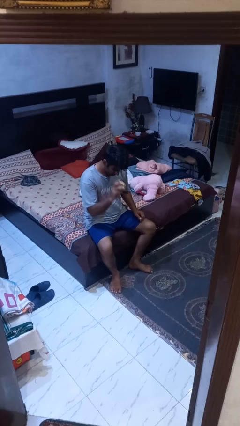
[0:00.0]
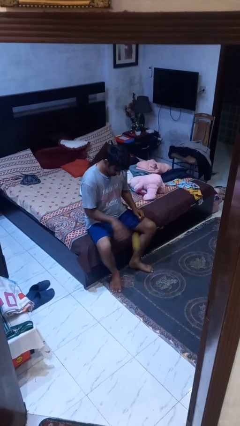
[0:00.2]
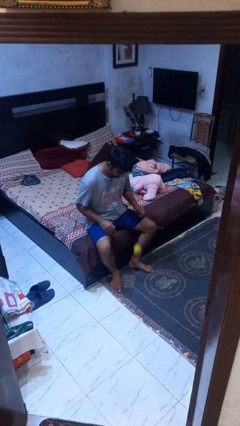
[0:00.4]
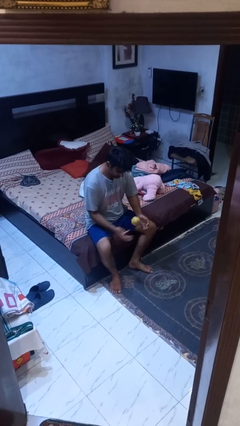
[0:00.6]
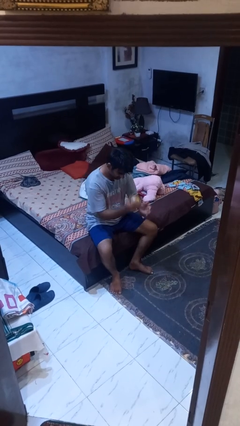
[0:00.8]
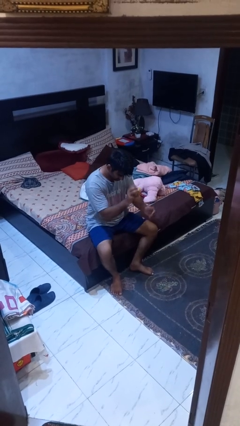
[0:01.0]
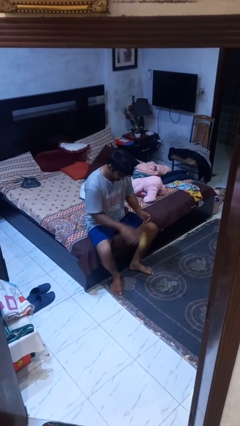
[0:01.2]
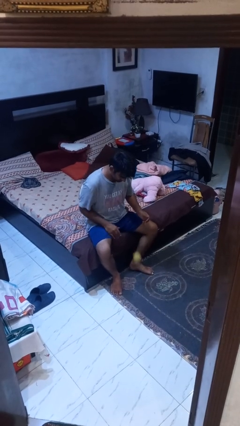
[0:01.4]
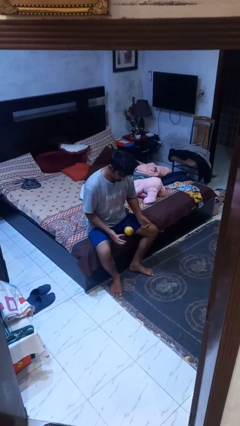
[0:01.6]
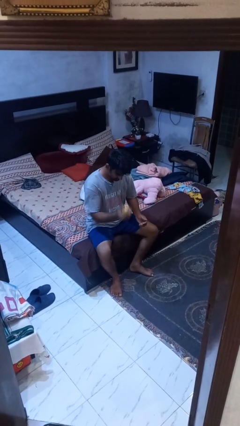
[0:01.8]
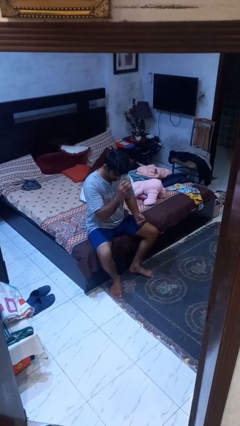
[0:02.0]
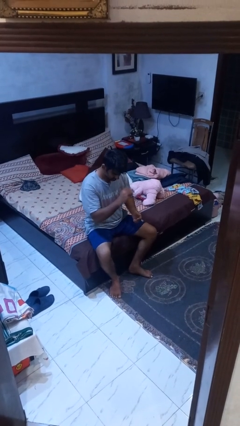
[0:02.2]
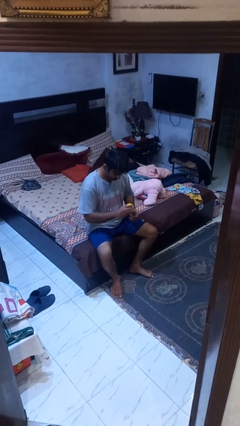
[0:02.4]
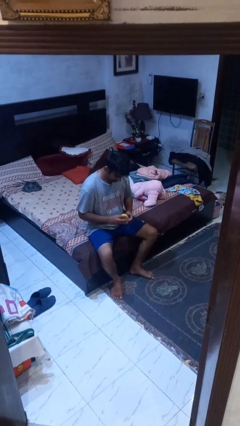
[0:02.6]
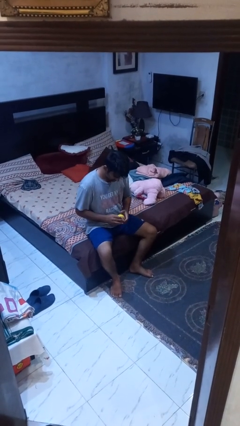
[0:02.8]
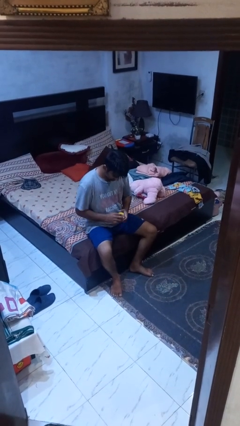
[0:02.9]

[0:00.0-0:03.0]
person bounces ball on floor

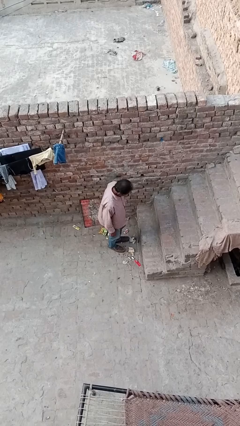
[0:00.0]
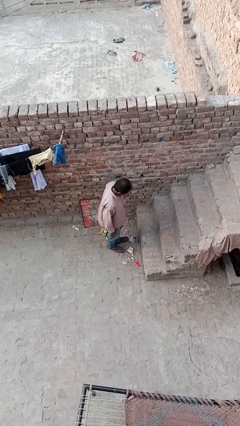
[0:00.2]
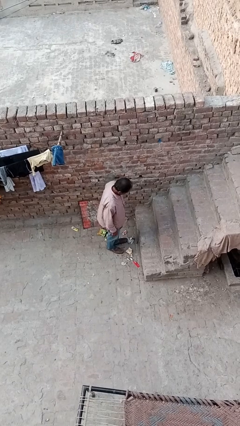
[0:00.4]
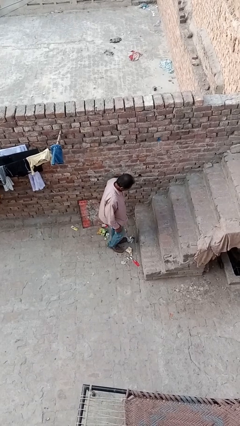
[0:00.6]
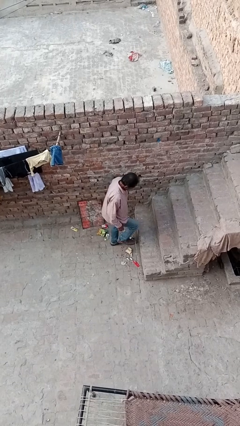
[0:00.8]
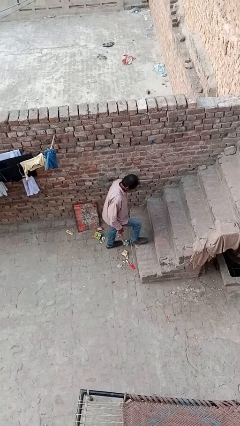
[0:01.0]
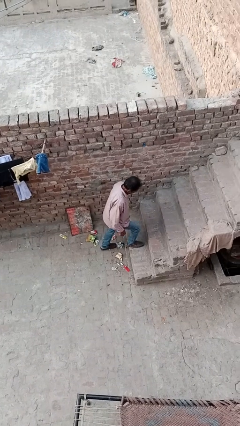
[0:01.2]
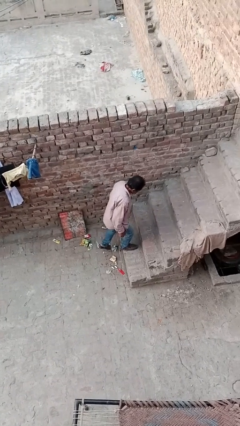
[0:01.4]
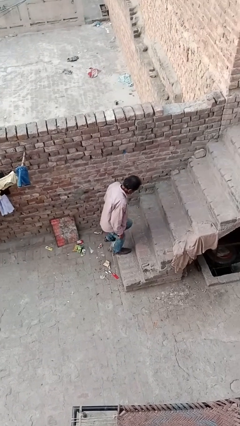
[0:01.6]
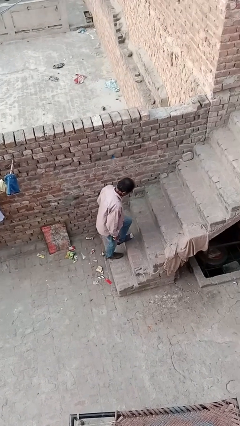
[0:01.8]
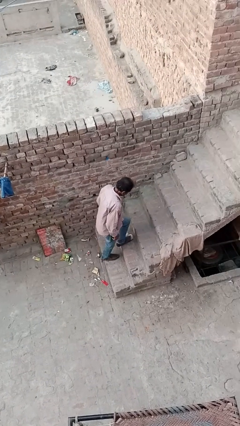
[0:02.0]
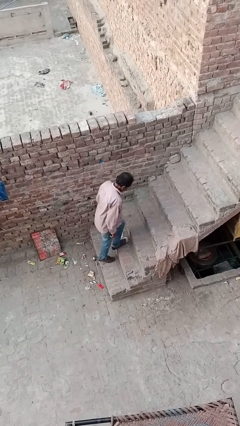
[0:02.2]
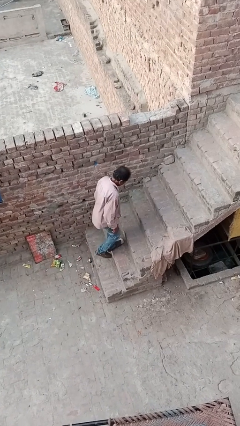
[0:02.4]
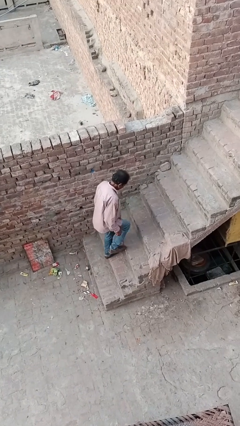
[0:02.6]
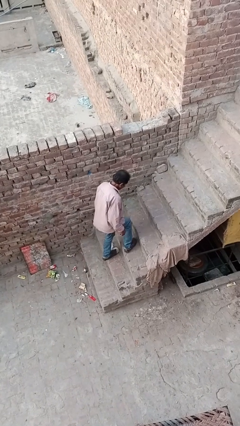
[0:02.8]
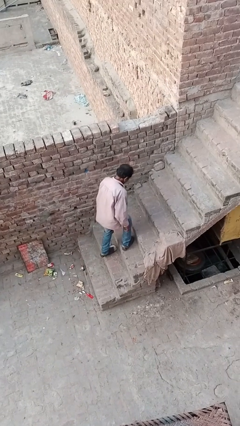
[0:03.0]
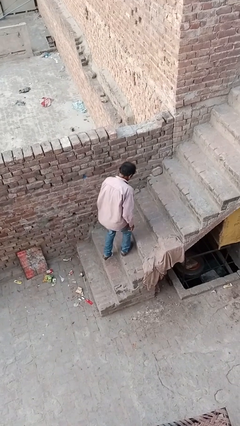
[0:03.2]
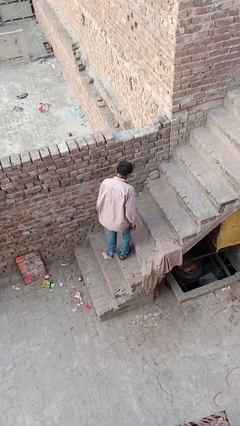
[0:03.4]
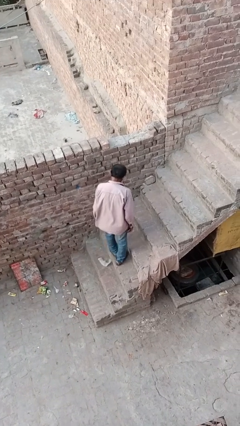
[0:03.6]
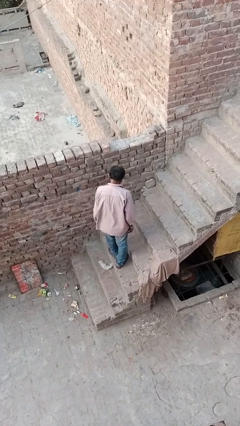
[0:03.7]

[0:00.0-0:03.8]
person climbs up stairs

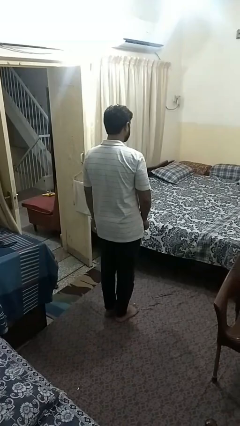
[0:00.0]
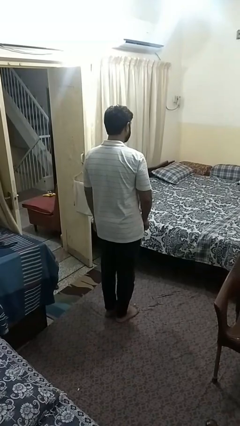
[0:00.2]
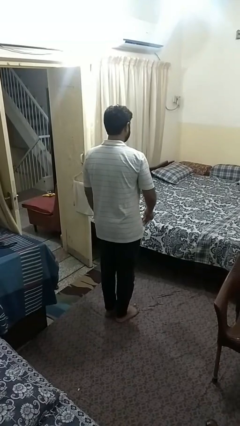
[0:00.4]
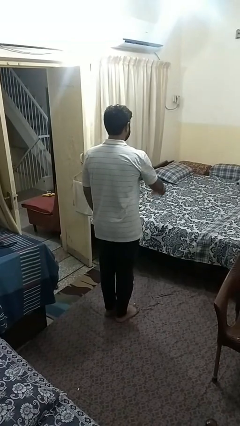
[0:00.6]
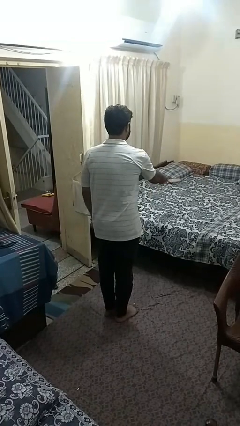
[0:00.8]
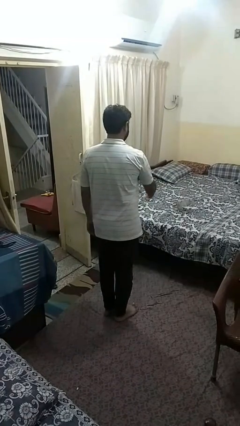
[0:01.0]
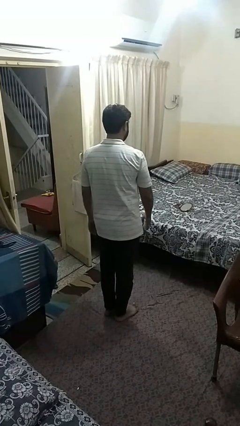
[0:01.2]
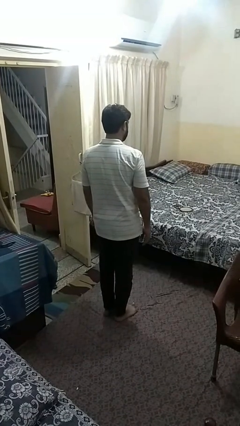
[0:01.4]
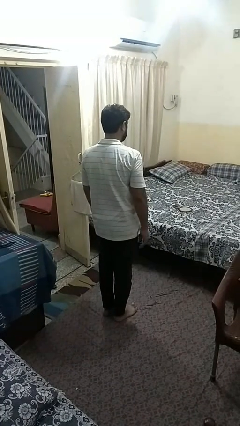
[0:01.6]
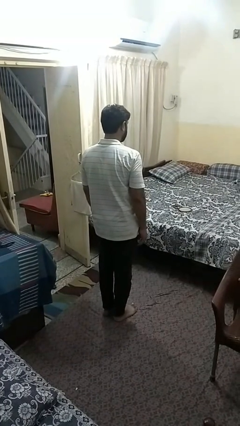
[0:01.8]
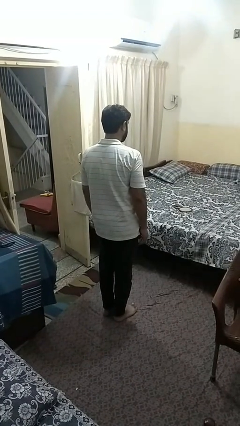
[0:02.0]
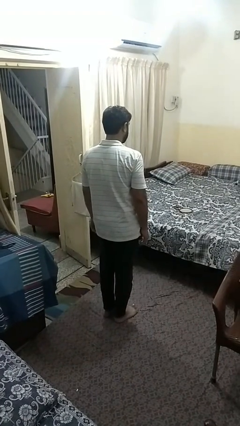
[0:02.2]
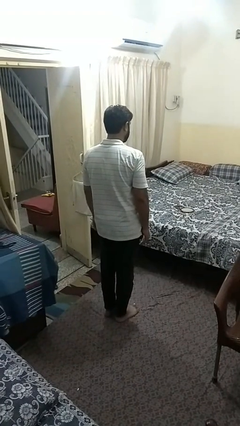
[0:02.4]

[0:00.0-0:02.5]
person throws object on bed

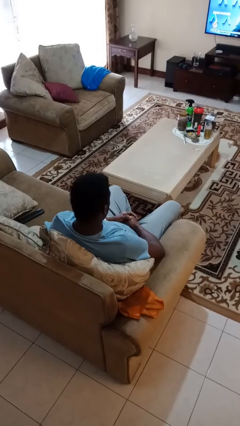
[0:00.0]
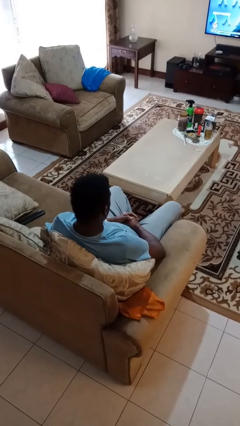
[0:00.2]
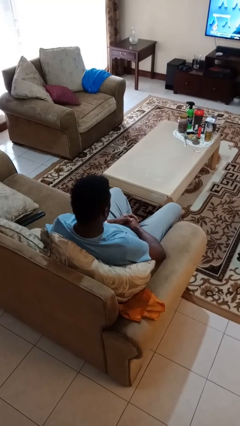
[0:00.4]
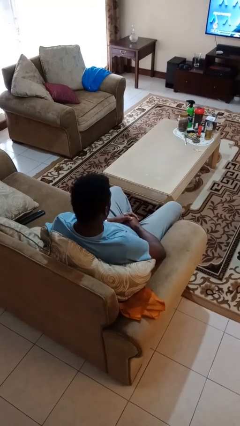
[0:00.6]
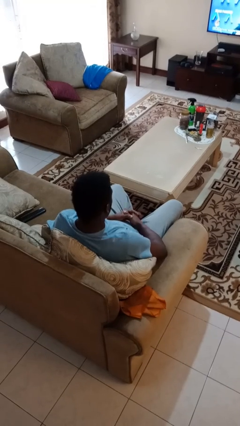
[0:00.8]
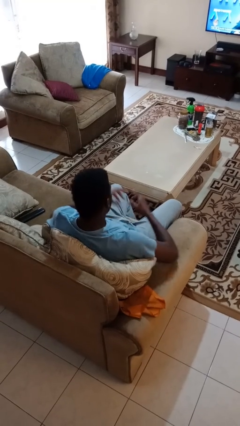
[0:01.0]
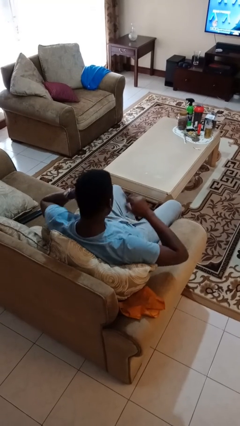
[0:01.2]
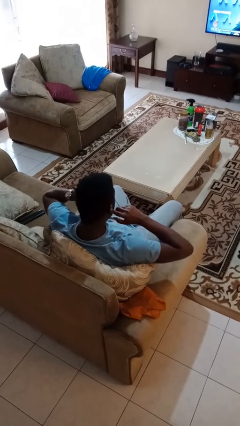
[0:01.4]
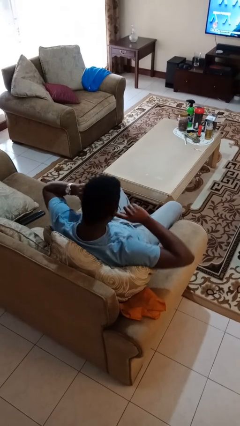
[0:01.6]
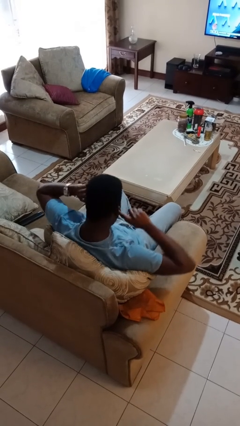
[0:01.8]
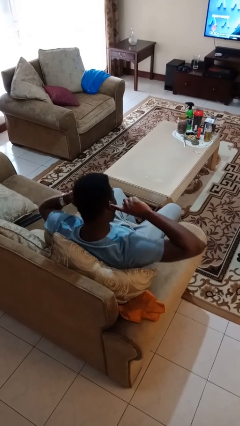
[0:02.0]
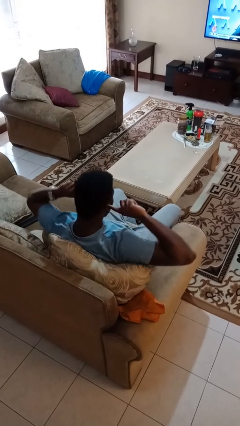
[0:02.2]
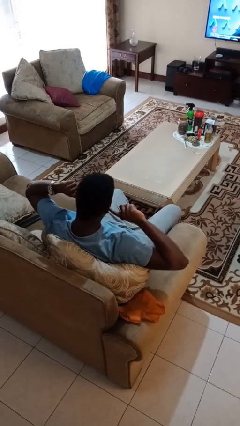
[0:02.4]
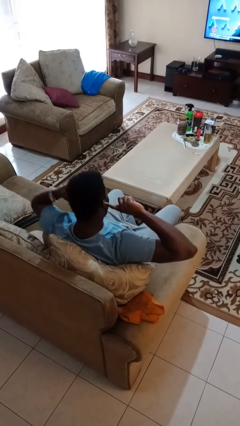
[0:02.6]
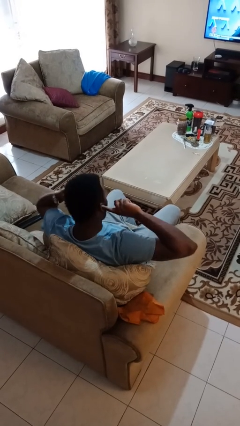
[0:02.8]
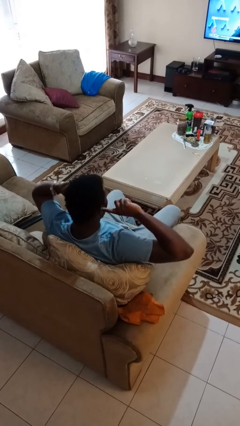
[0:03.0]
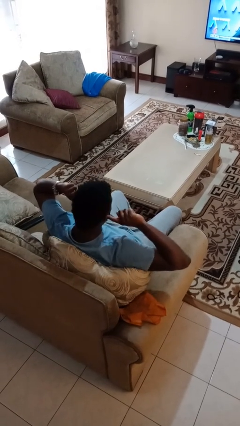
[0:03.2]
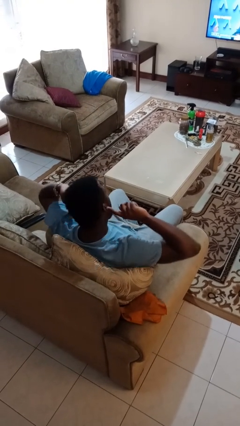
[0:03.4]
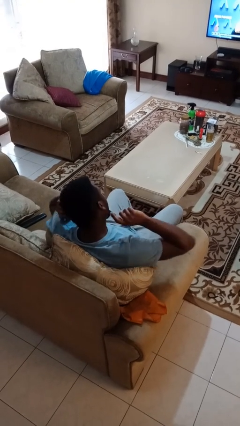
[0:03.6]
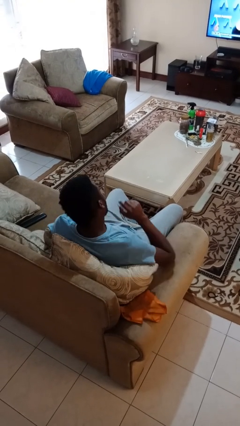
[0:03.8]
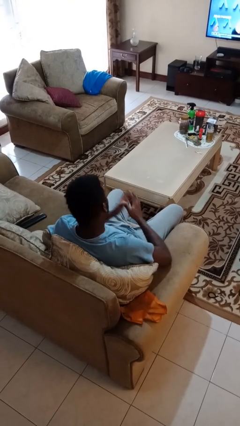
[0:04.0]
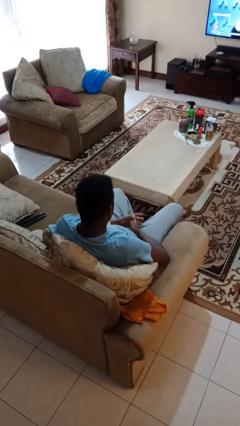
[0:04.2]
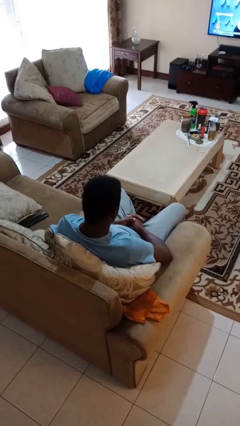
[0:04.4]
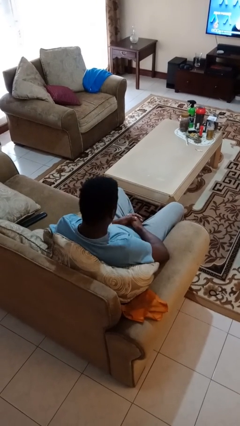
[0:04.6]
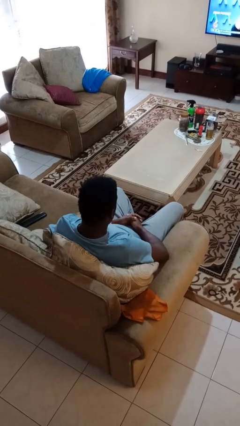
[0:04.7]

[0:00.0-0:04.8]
person puts fingers in ear

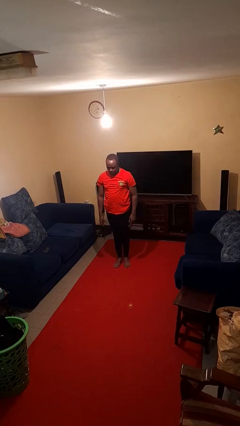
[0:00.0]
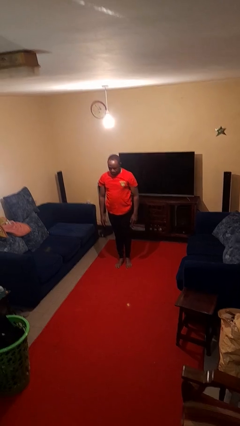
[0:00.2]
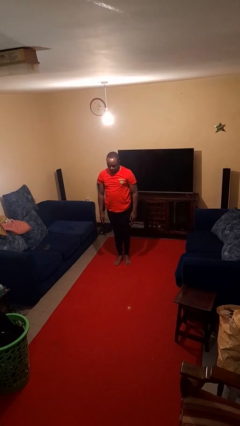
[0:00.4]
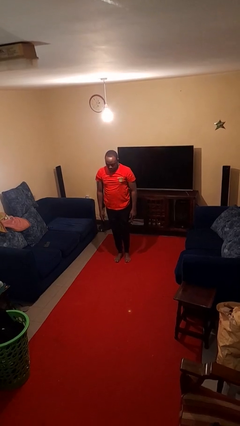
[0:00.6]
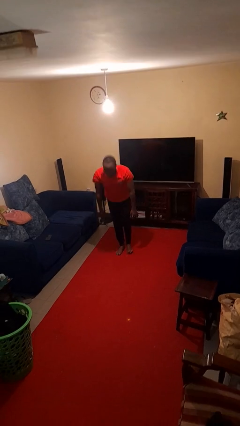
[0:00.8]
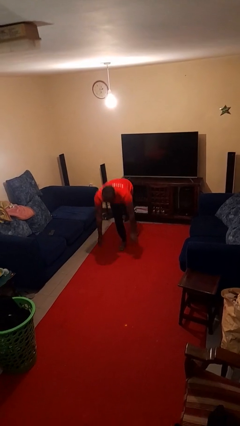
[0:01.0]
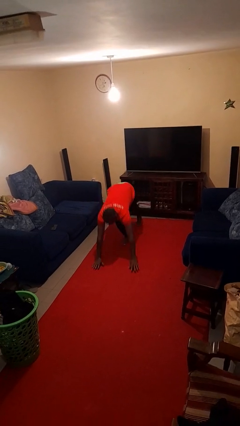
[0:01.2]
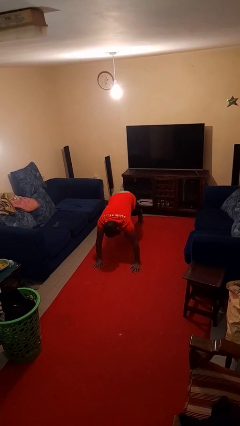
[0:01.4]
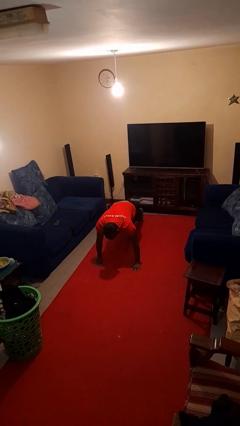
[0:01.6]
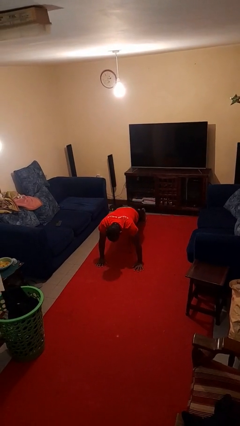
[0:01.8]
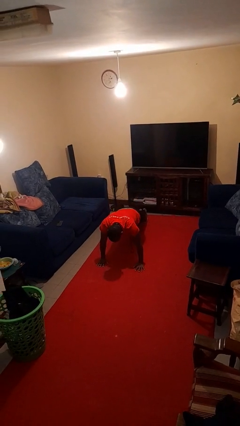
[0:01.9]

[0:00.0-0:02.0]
person exercises with plank

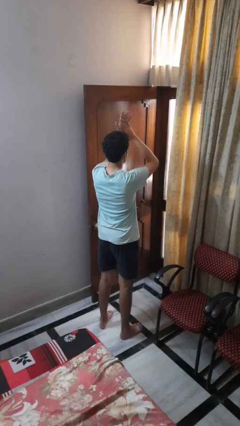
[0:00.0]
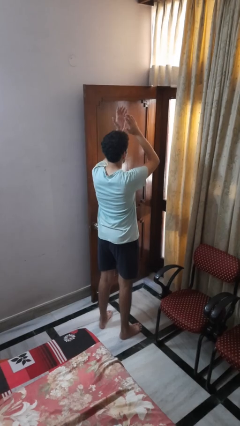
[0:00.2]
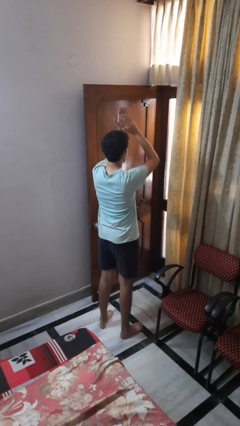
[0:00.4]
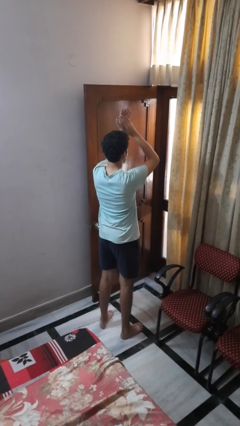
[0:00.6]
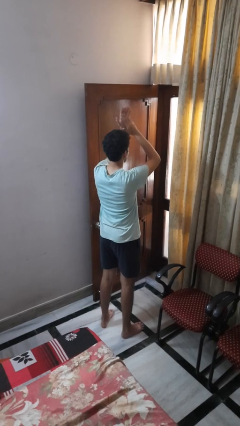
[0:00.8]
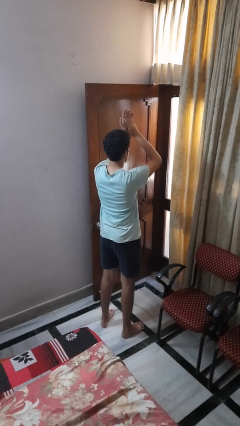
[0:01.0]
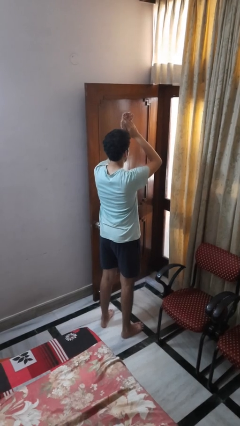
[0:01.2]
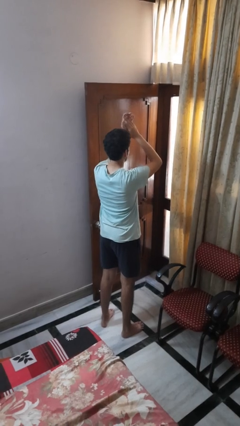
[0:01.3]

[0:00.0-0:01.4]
person claps hands
